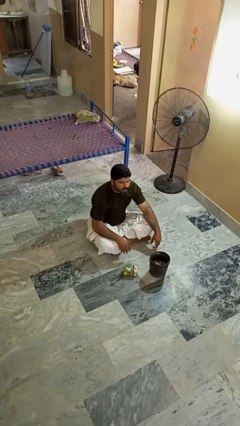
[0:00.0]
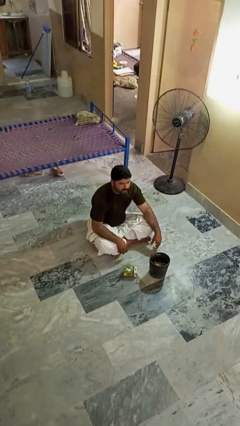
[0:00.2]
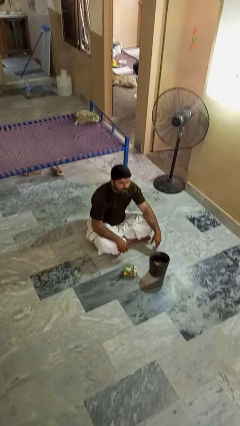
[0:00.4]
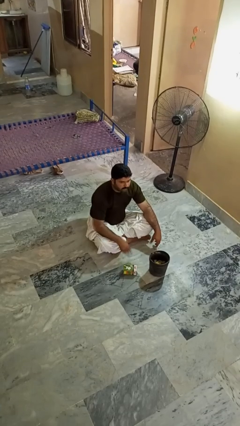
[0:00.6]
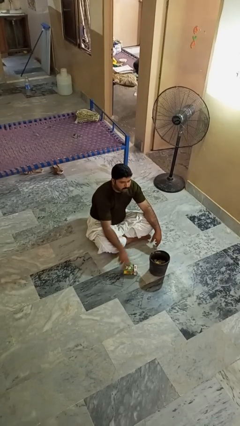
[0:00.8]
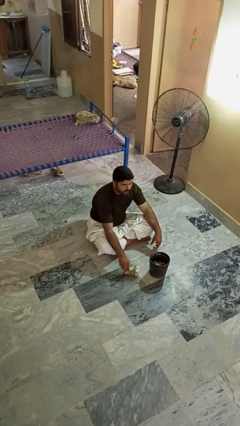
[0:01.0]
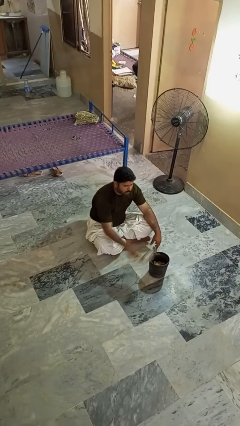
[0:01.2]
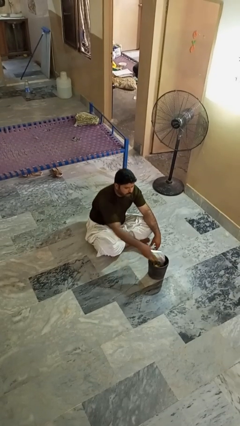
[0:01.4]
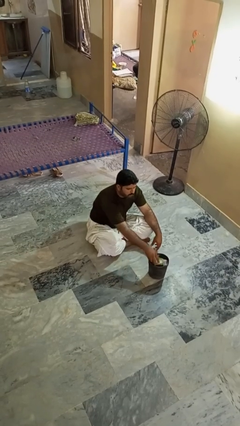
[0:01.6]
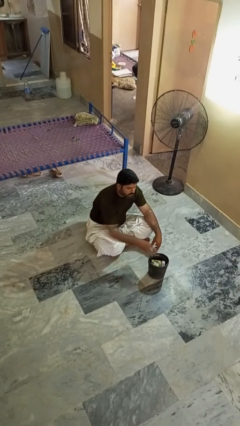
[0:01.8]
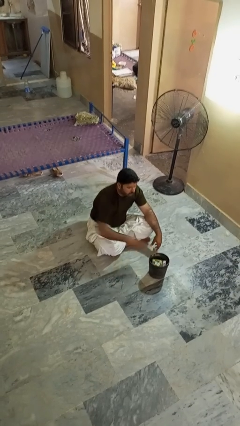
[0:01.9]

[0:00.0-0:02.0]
person puts object into basket

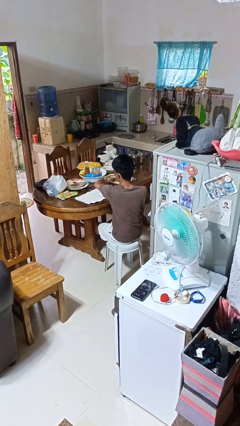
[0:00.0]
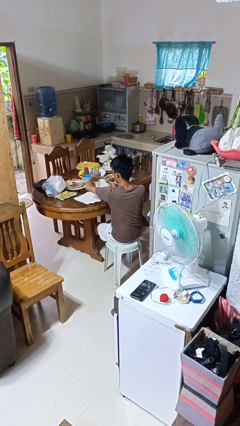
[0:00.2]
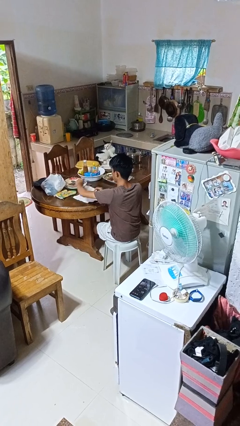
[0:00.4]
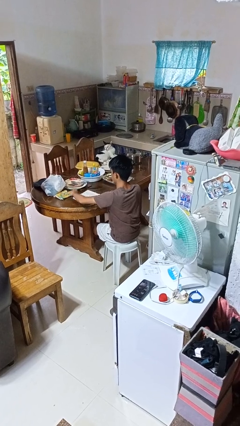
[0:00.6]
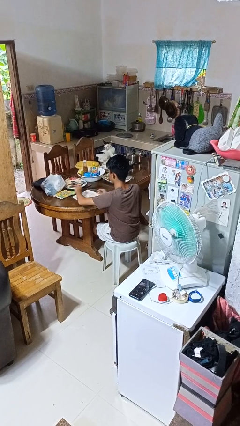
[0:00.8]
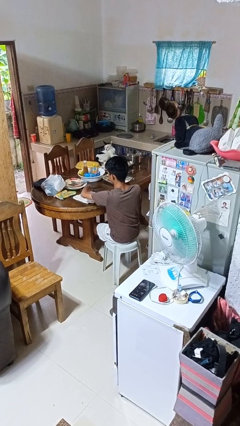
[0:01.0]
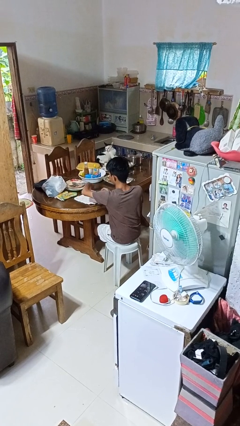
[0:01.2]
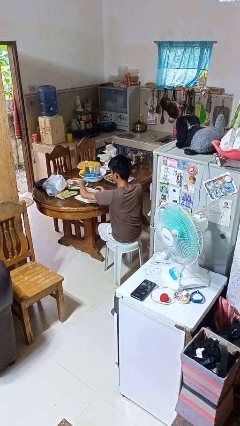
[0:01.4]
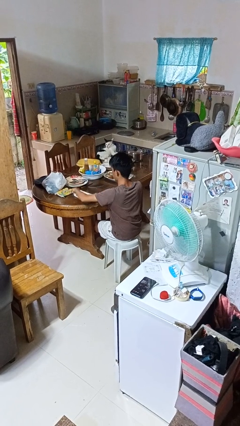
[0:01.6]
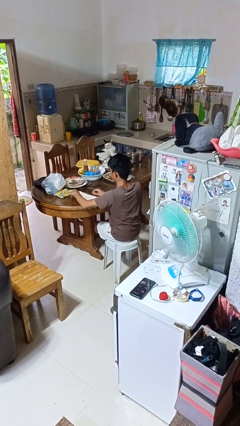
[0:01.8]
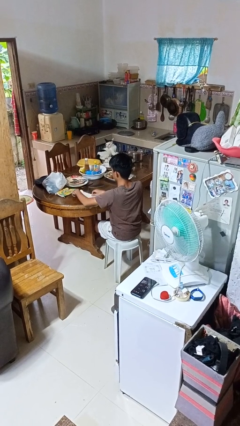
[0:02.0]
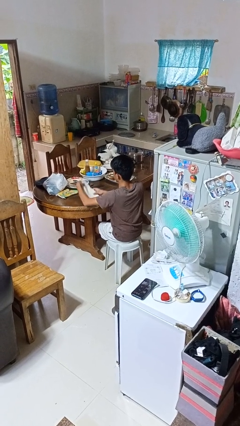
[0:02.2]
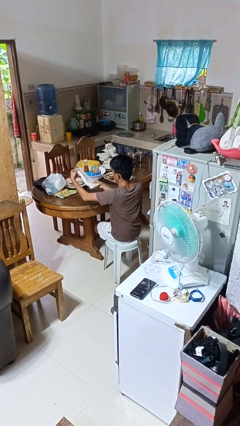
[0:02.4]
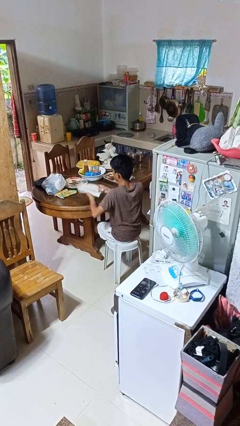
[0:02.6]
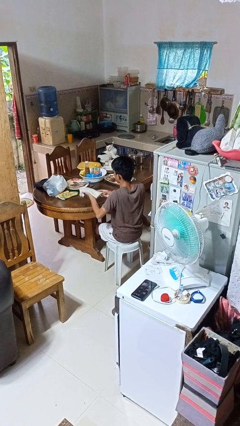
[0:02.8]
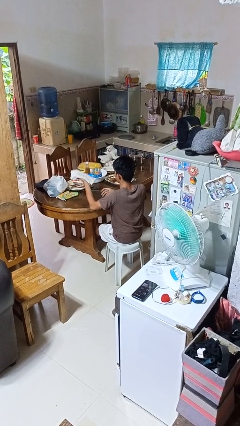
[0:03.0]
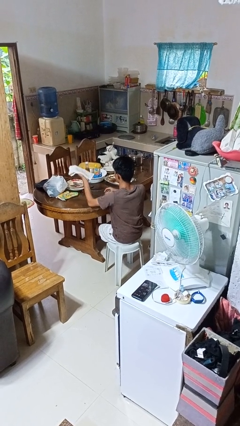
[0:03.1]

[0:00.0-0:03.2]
person folds tablecloth

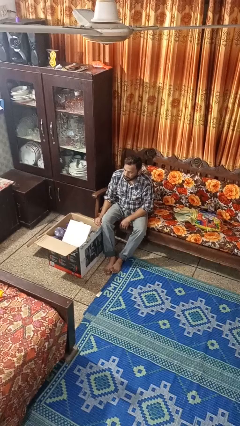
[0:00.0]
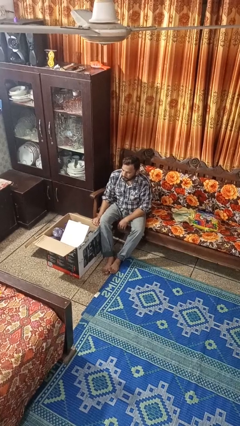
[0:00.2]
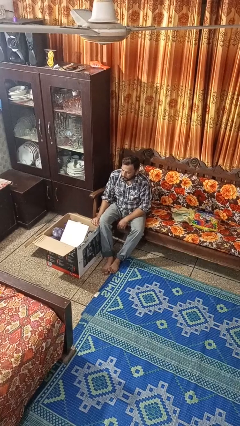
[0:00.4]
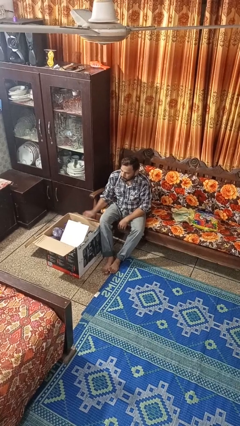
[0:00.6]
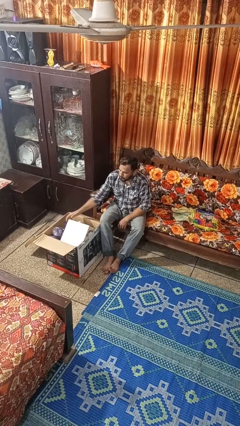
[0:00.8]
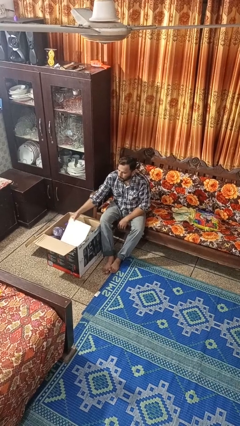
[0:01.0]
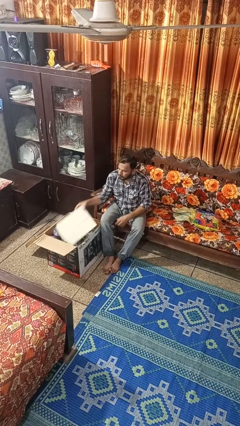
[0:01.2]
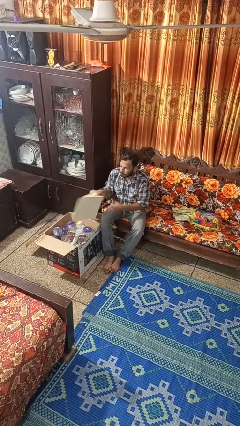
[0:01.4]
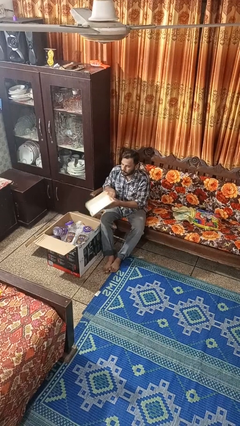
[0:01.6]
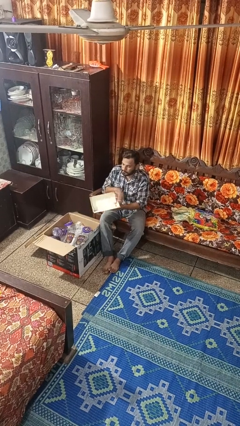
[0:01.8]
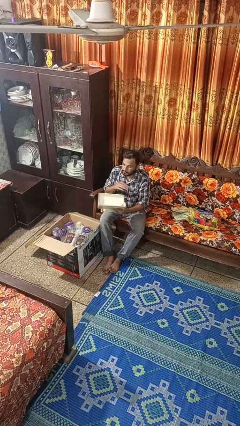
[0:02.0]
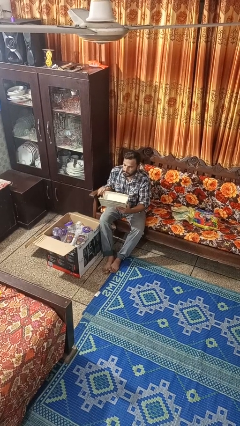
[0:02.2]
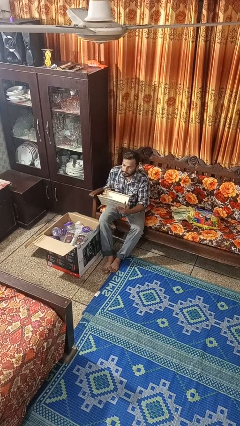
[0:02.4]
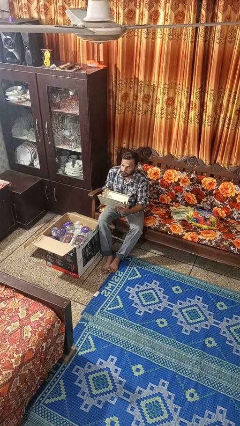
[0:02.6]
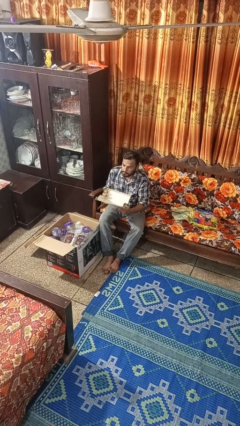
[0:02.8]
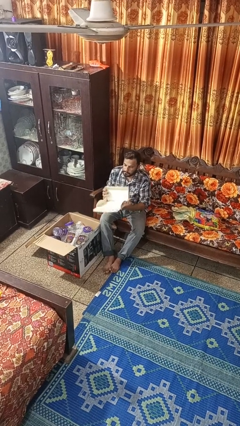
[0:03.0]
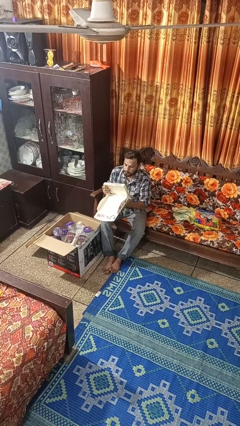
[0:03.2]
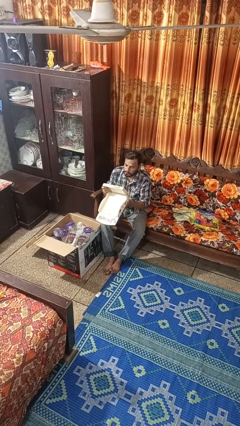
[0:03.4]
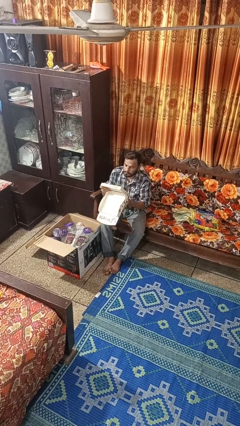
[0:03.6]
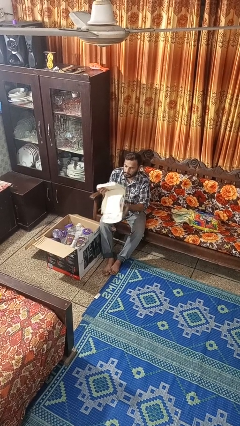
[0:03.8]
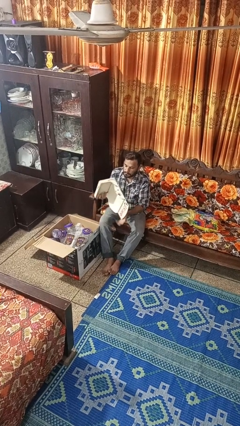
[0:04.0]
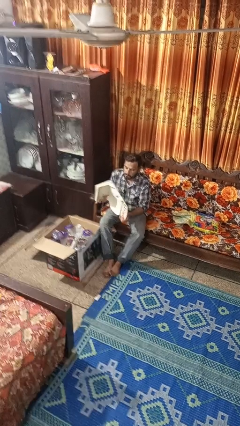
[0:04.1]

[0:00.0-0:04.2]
person takes object from box

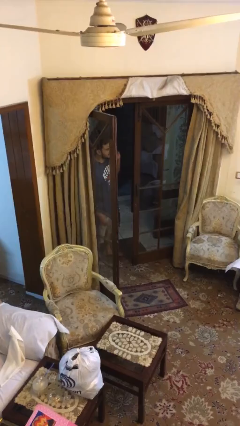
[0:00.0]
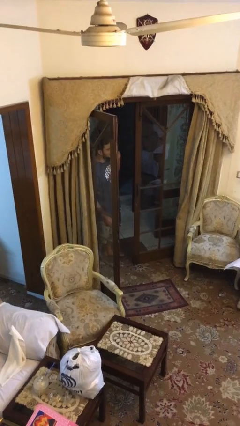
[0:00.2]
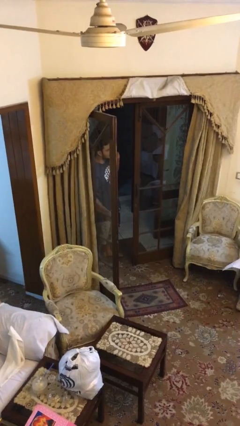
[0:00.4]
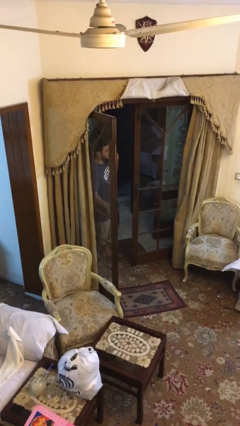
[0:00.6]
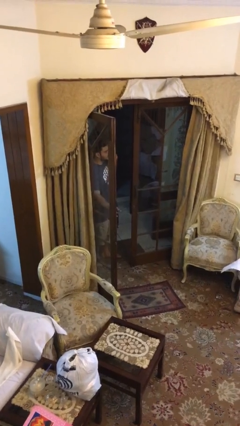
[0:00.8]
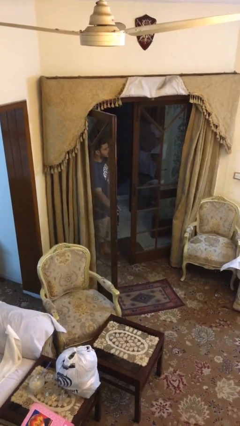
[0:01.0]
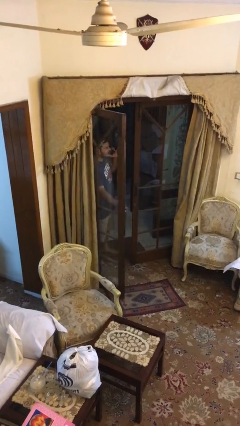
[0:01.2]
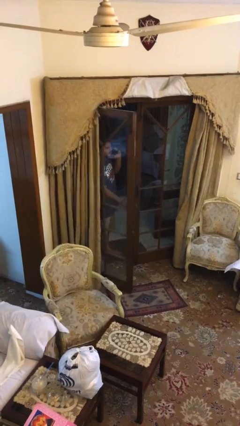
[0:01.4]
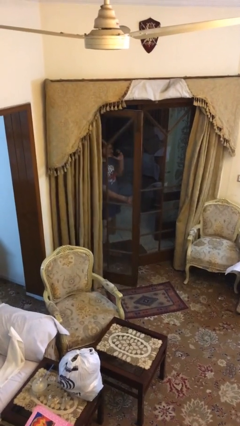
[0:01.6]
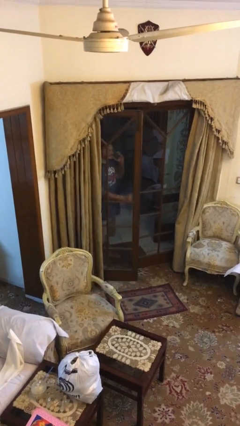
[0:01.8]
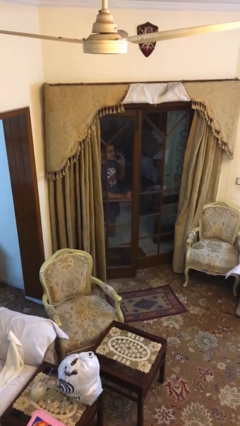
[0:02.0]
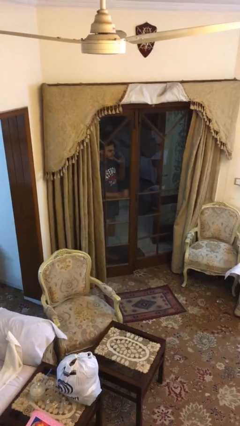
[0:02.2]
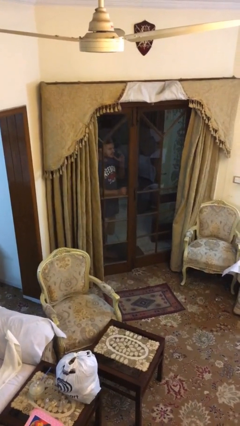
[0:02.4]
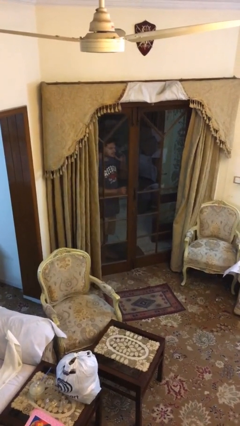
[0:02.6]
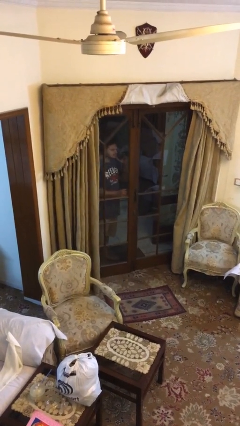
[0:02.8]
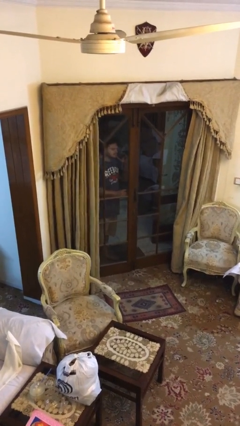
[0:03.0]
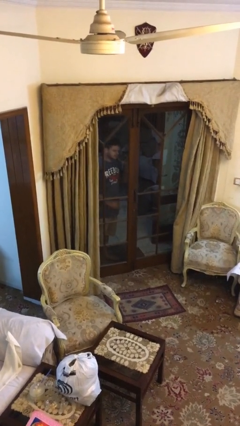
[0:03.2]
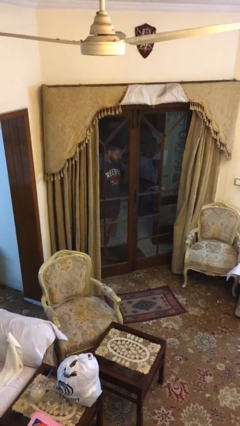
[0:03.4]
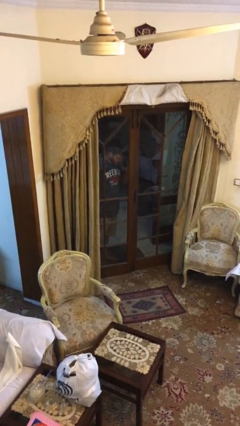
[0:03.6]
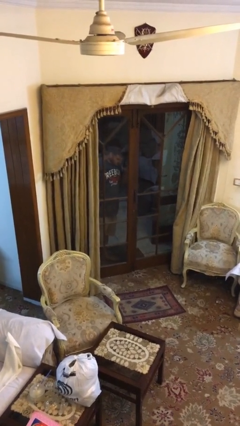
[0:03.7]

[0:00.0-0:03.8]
person closes facility door

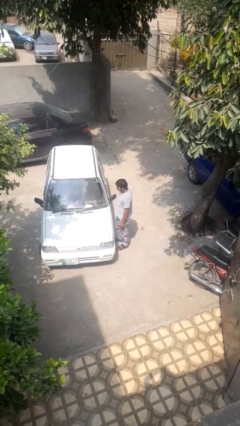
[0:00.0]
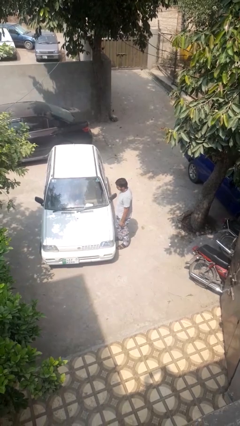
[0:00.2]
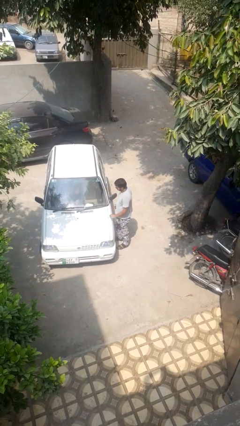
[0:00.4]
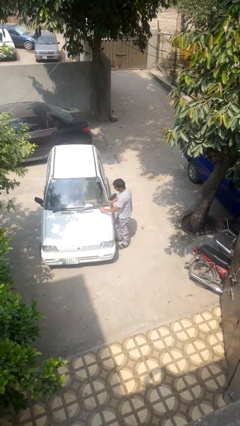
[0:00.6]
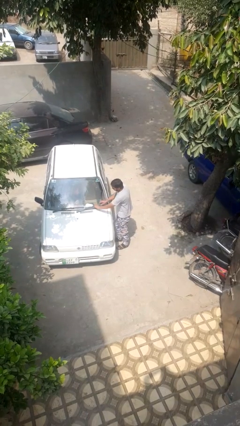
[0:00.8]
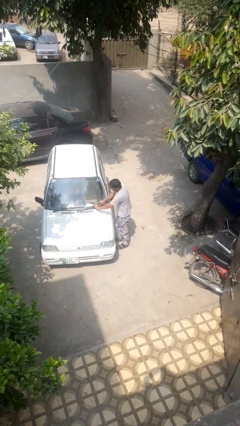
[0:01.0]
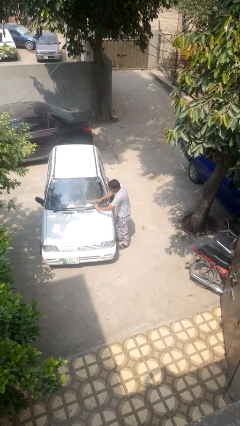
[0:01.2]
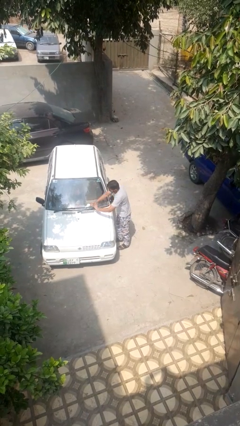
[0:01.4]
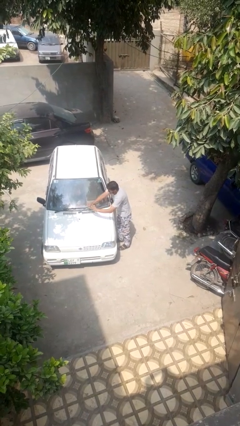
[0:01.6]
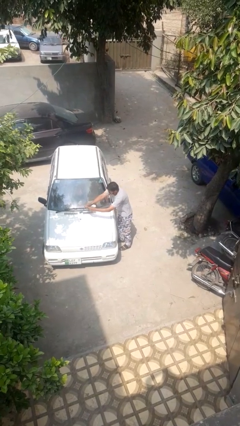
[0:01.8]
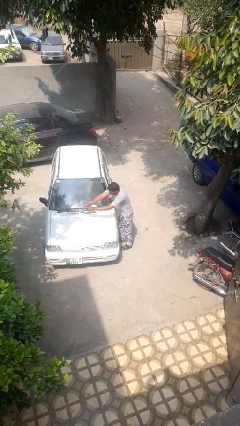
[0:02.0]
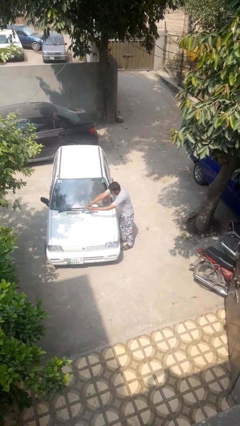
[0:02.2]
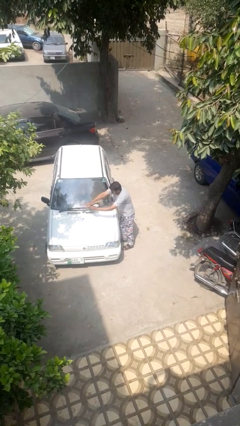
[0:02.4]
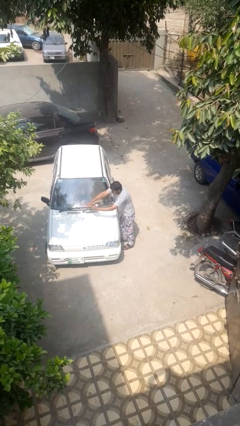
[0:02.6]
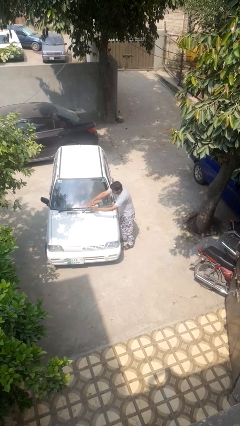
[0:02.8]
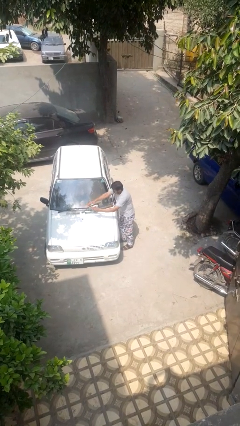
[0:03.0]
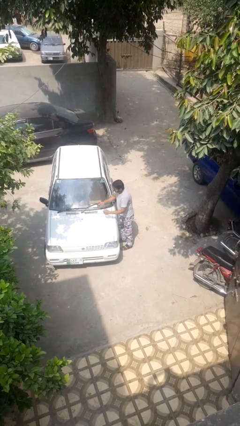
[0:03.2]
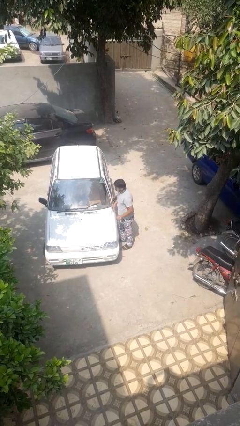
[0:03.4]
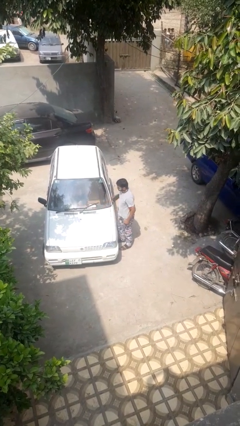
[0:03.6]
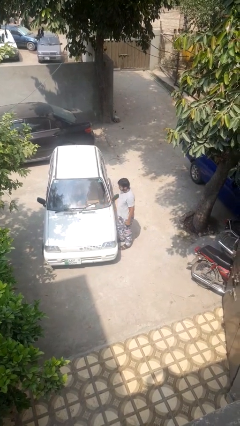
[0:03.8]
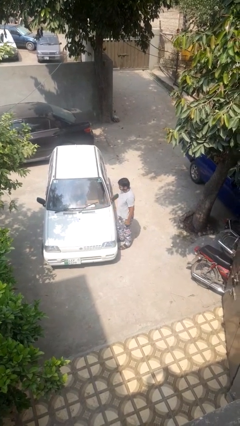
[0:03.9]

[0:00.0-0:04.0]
person flips up car wipers
